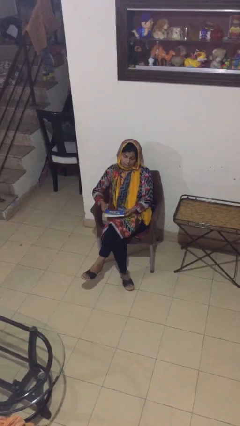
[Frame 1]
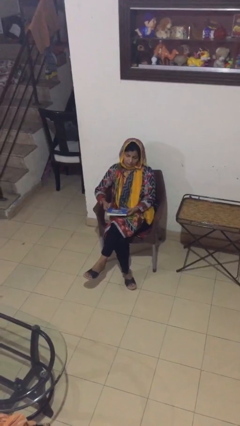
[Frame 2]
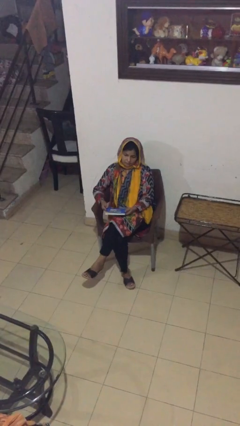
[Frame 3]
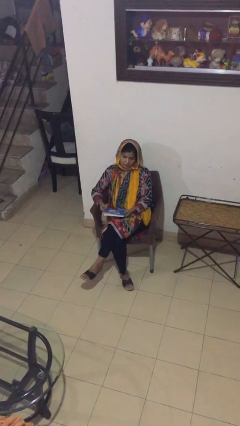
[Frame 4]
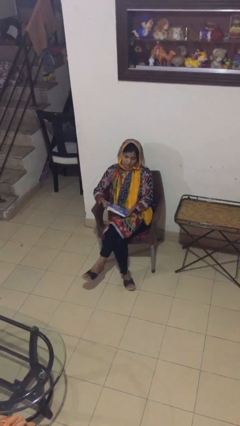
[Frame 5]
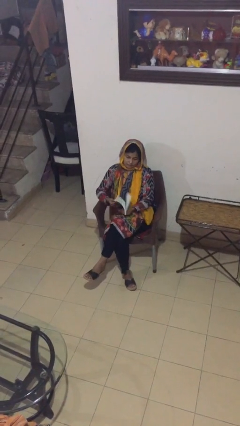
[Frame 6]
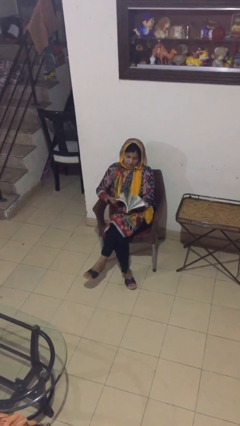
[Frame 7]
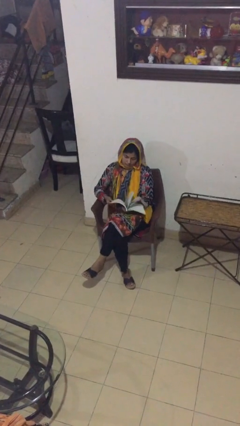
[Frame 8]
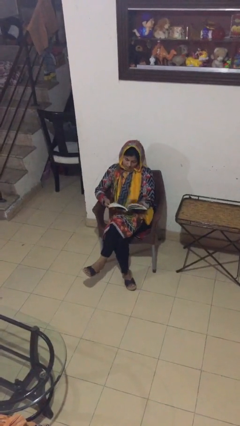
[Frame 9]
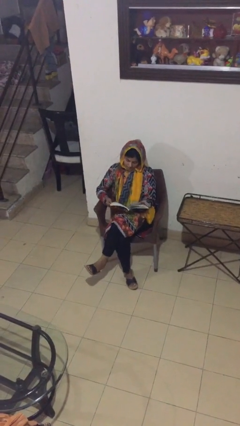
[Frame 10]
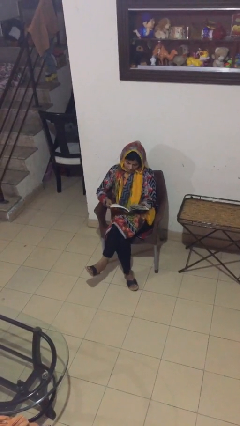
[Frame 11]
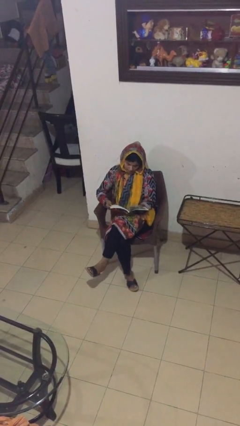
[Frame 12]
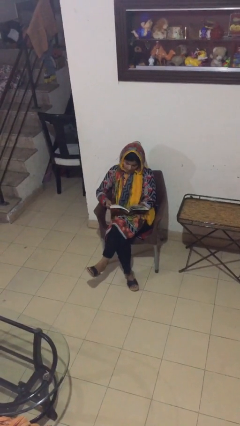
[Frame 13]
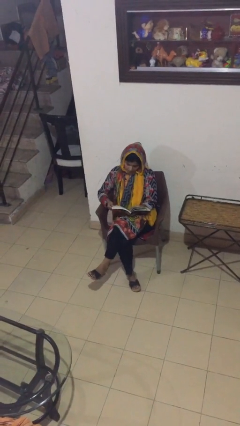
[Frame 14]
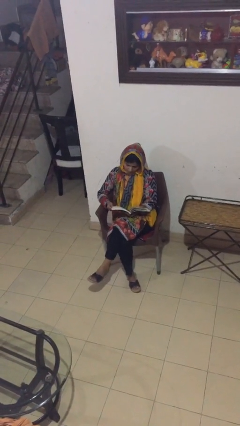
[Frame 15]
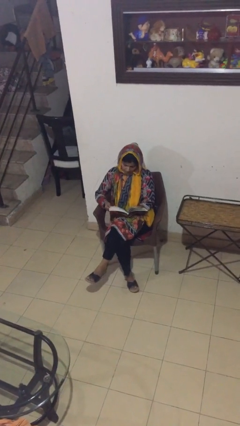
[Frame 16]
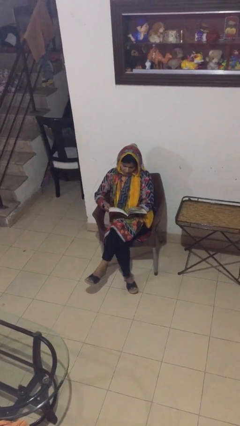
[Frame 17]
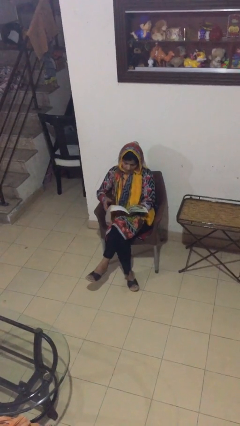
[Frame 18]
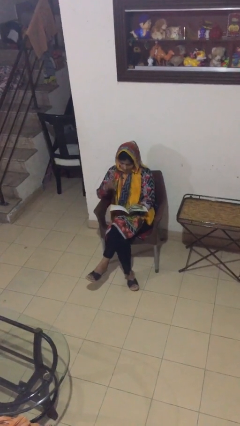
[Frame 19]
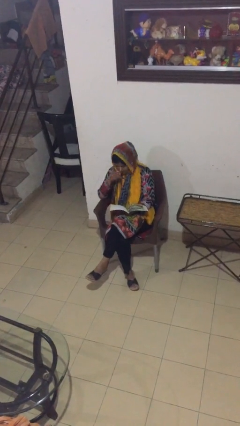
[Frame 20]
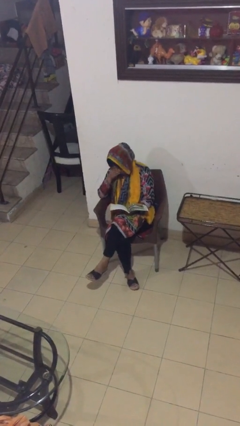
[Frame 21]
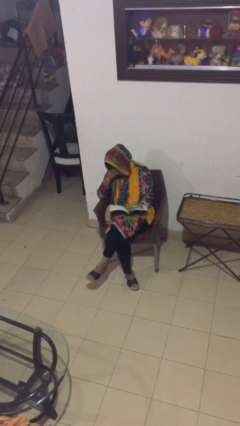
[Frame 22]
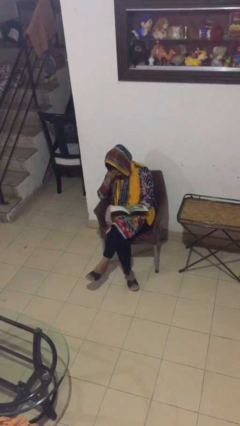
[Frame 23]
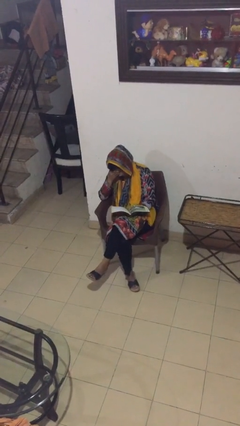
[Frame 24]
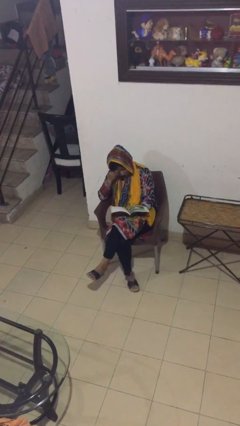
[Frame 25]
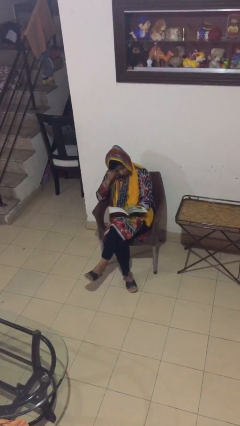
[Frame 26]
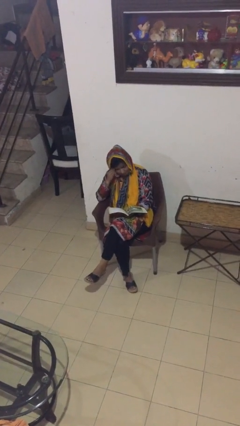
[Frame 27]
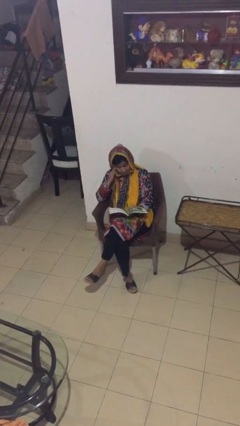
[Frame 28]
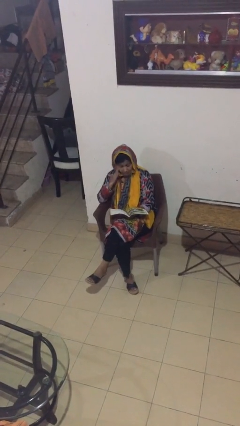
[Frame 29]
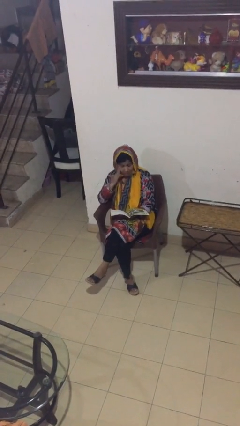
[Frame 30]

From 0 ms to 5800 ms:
person reads document

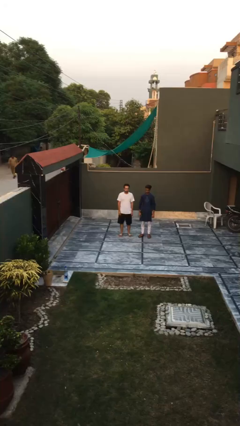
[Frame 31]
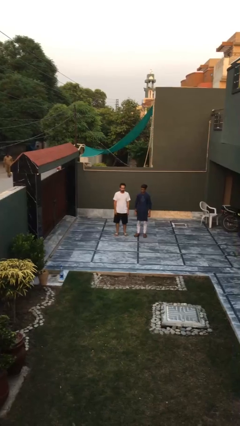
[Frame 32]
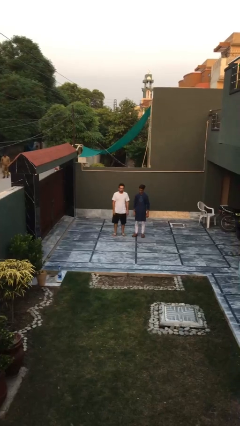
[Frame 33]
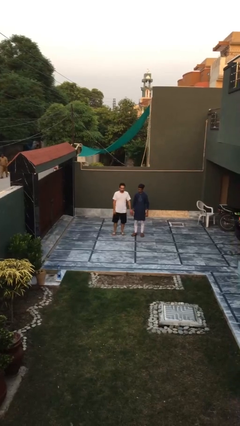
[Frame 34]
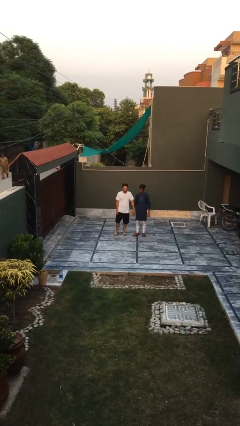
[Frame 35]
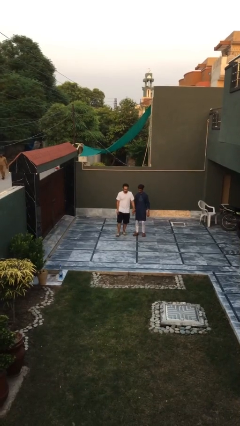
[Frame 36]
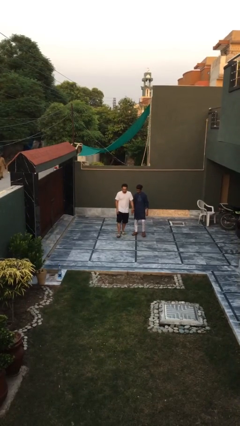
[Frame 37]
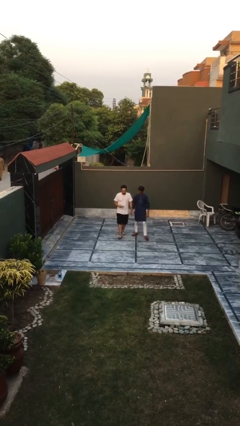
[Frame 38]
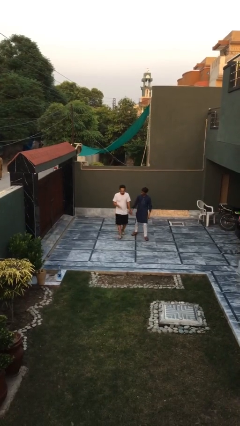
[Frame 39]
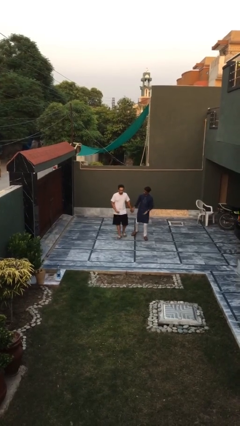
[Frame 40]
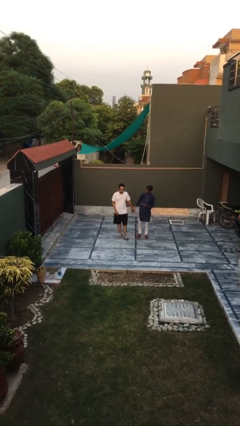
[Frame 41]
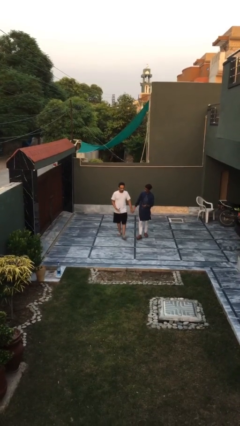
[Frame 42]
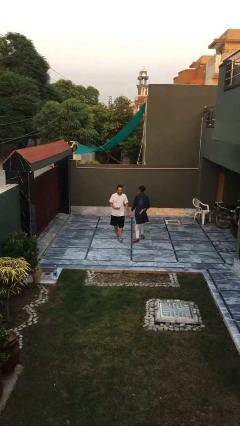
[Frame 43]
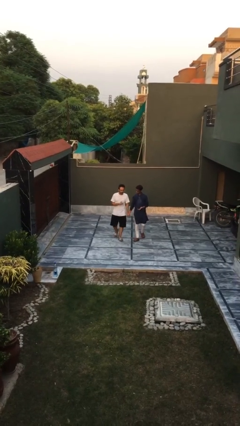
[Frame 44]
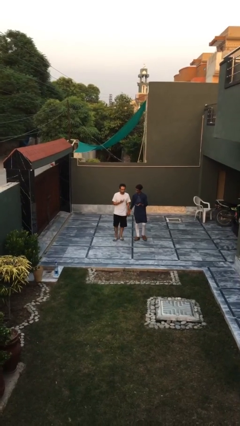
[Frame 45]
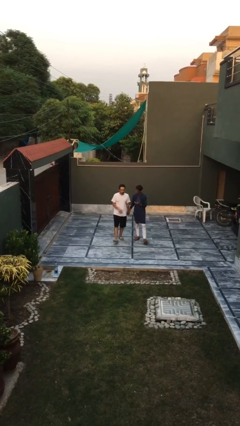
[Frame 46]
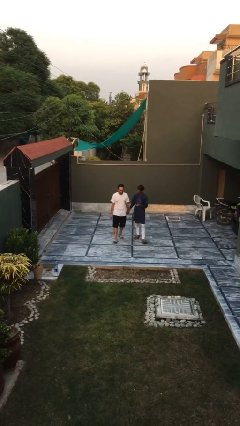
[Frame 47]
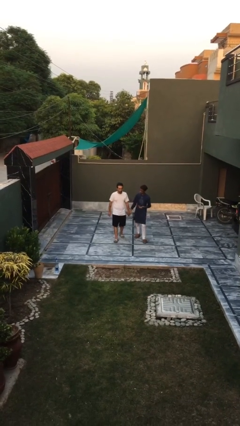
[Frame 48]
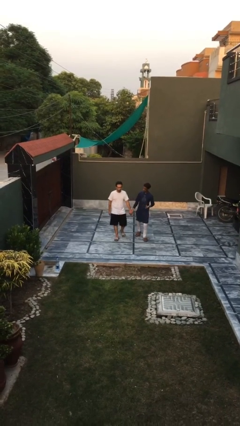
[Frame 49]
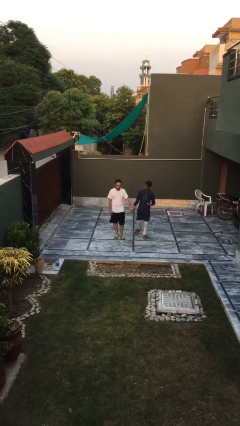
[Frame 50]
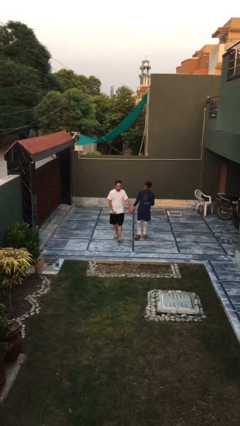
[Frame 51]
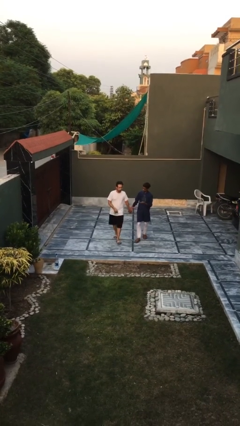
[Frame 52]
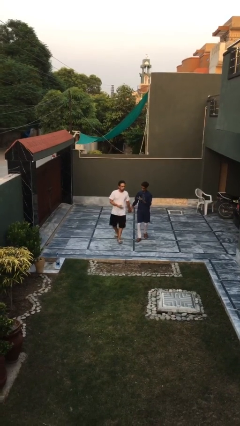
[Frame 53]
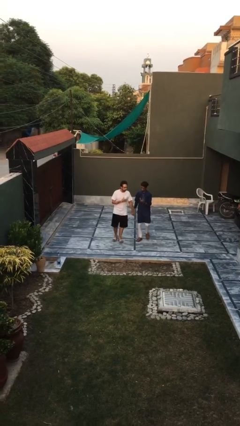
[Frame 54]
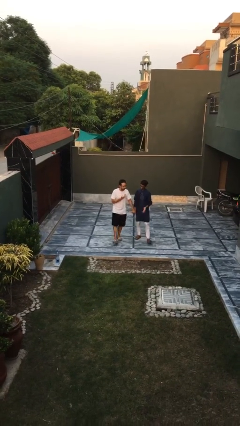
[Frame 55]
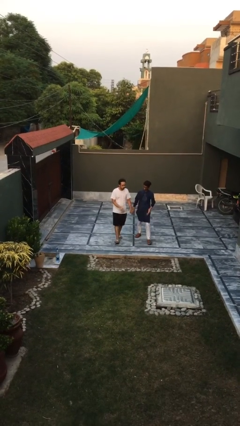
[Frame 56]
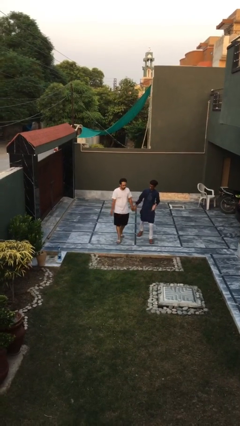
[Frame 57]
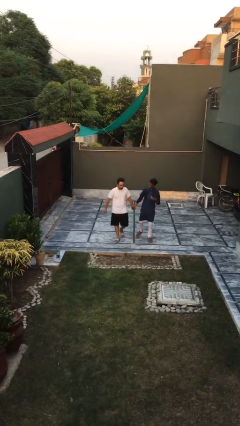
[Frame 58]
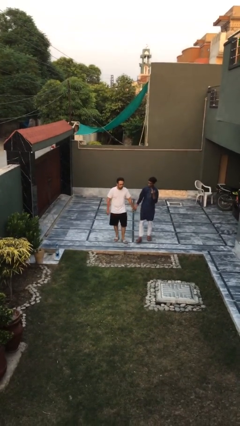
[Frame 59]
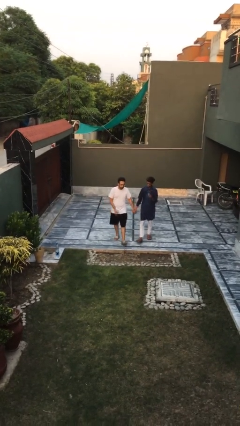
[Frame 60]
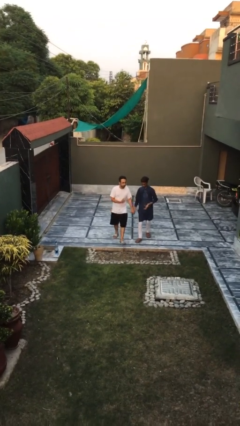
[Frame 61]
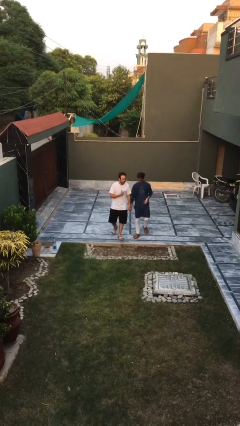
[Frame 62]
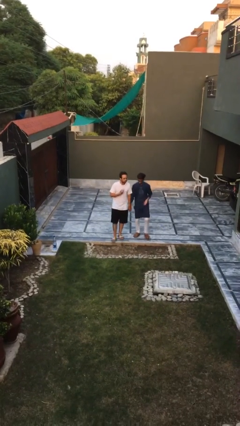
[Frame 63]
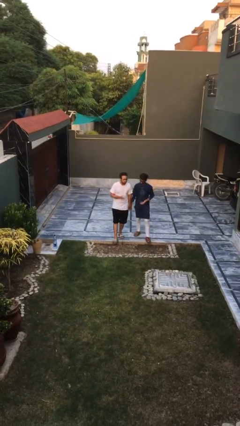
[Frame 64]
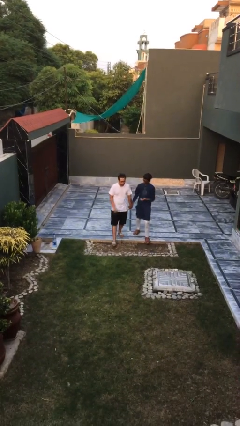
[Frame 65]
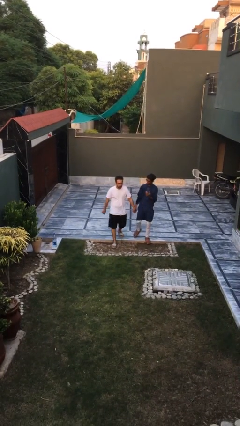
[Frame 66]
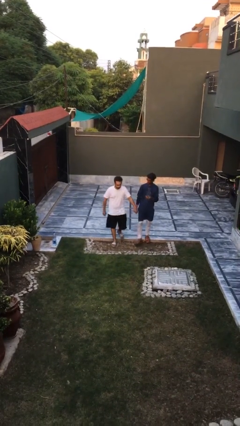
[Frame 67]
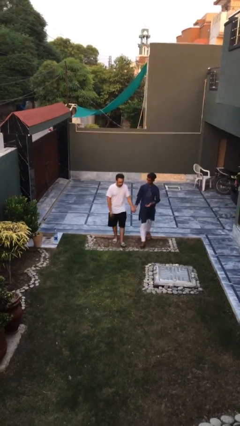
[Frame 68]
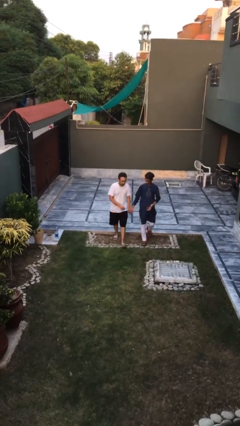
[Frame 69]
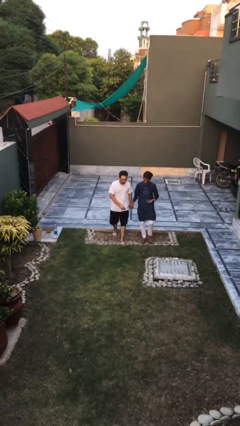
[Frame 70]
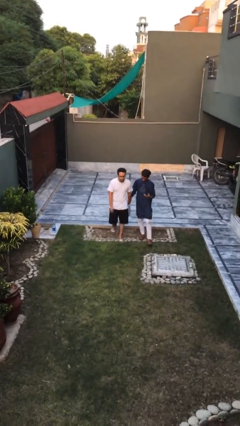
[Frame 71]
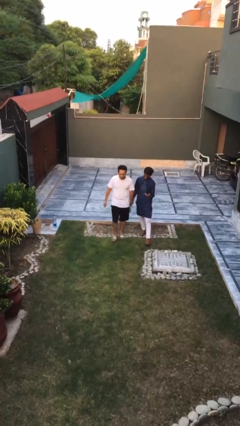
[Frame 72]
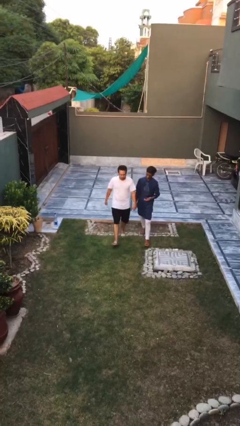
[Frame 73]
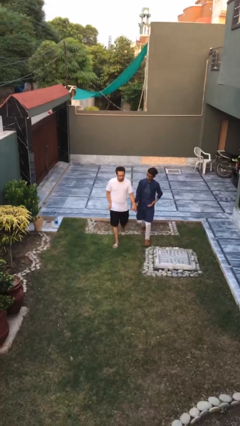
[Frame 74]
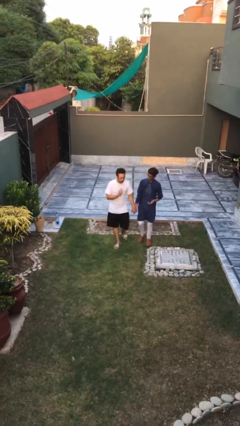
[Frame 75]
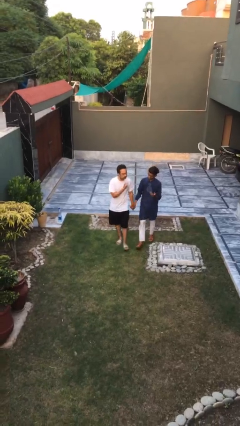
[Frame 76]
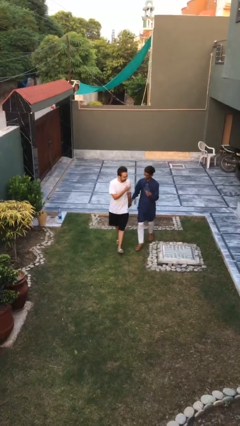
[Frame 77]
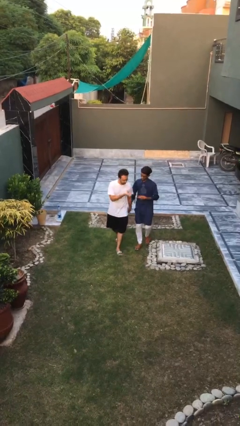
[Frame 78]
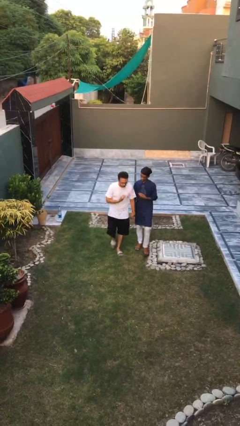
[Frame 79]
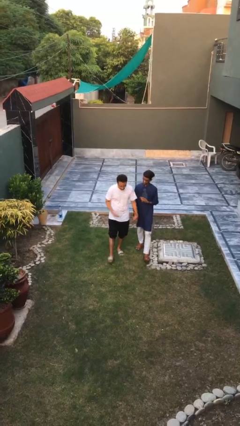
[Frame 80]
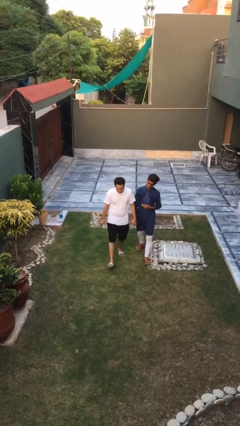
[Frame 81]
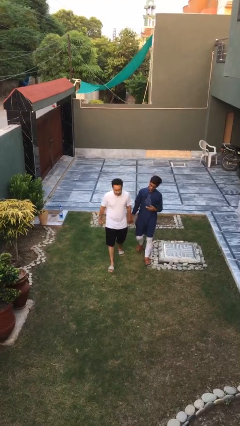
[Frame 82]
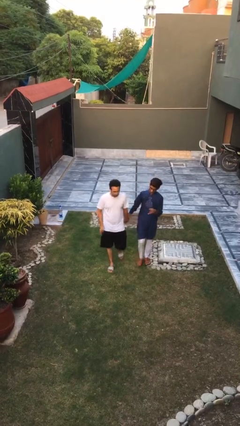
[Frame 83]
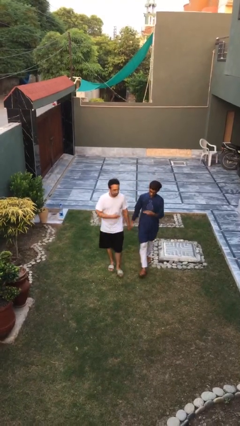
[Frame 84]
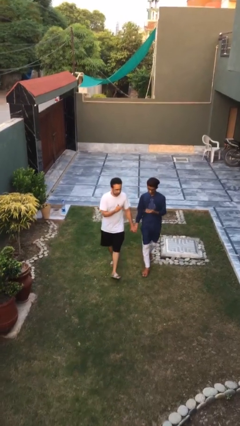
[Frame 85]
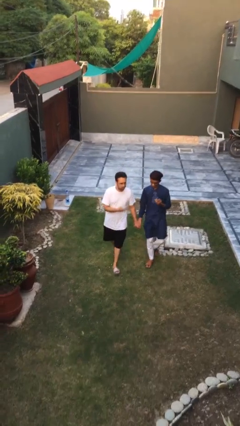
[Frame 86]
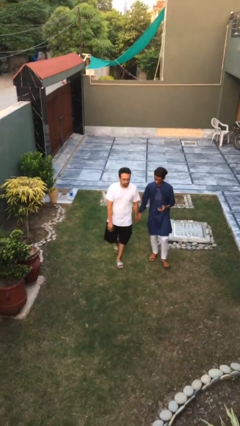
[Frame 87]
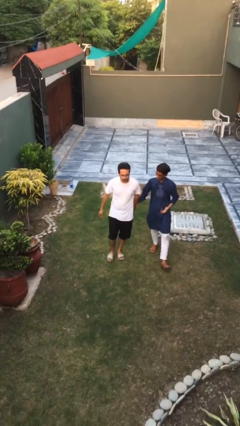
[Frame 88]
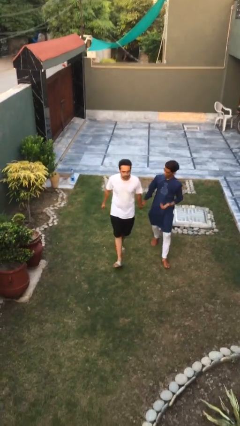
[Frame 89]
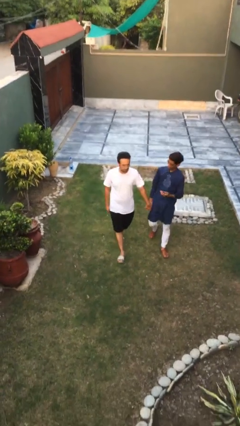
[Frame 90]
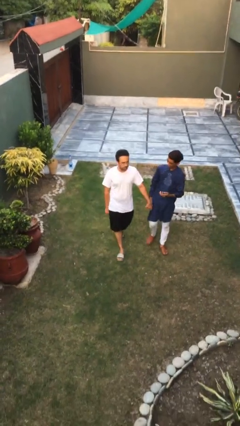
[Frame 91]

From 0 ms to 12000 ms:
person holds hand

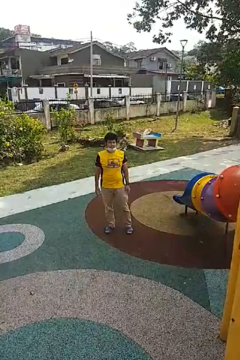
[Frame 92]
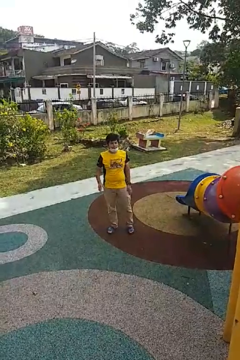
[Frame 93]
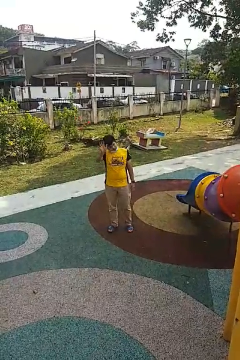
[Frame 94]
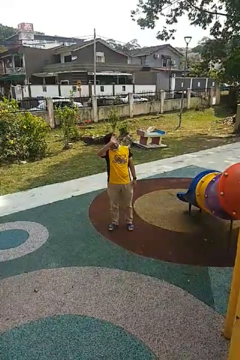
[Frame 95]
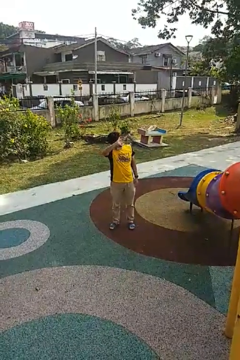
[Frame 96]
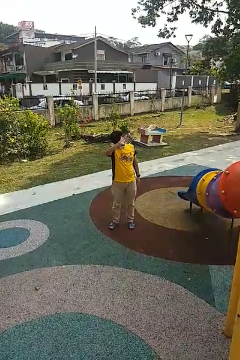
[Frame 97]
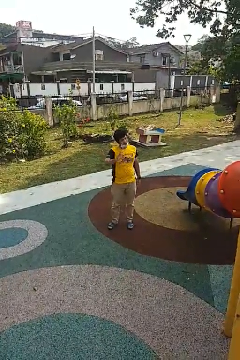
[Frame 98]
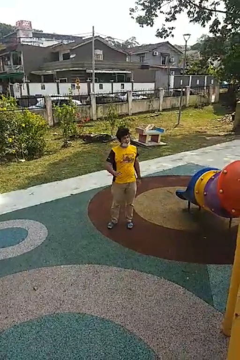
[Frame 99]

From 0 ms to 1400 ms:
person waves at person
